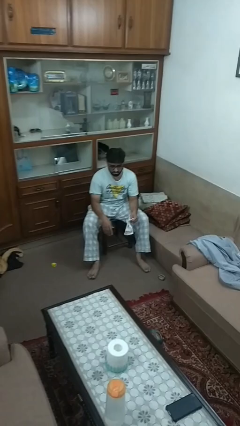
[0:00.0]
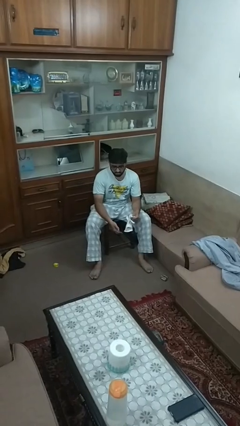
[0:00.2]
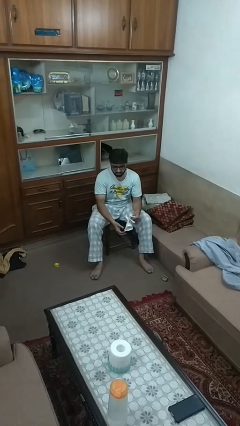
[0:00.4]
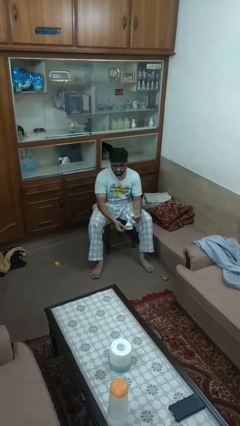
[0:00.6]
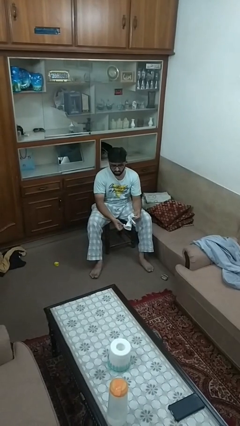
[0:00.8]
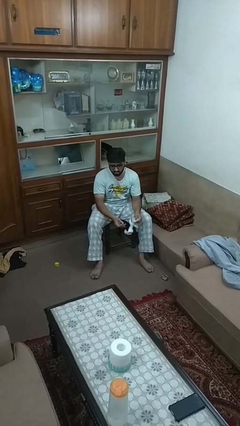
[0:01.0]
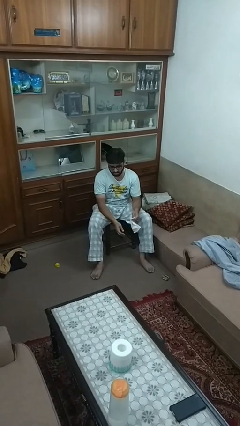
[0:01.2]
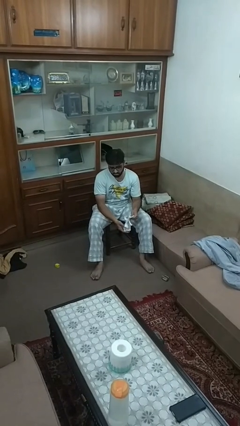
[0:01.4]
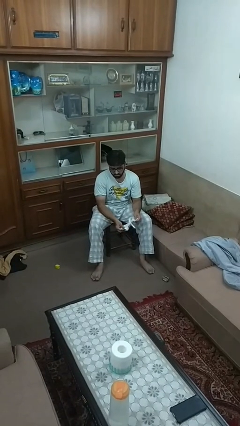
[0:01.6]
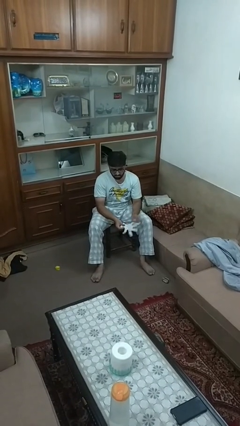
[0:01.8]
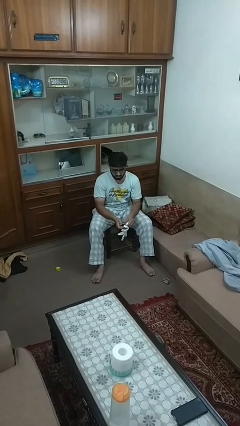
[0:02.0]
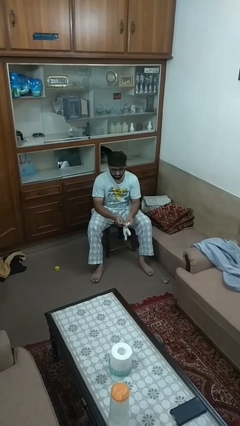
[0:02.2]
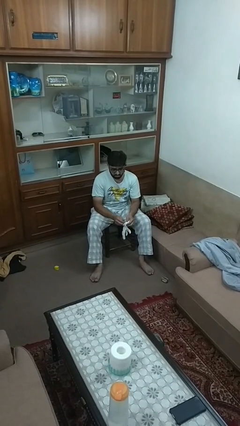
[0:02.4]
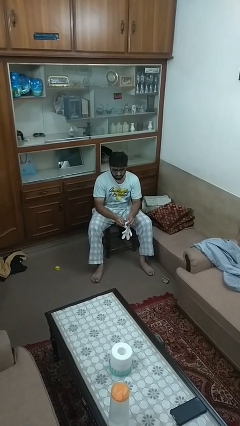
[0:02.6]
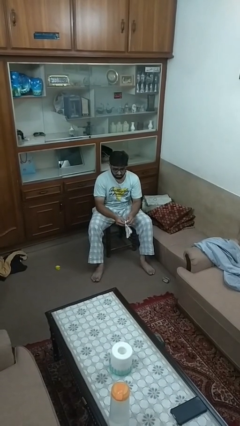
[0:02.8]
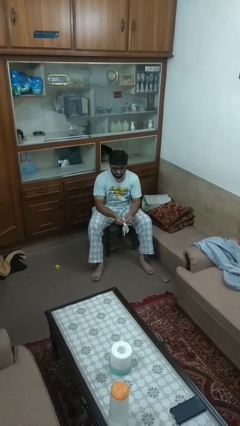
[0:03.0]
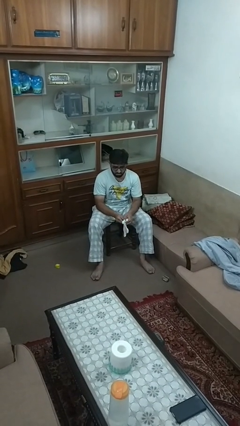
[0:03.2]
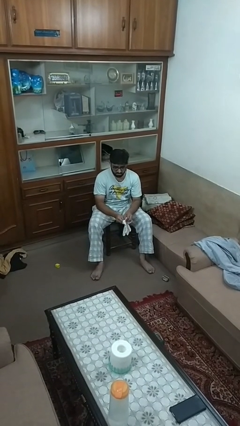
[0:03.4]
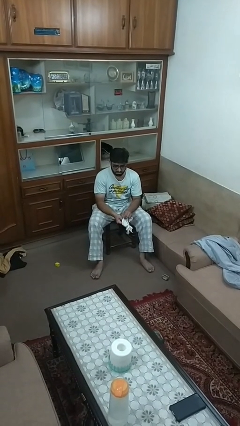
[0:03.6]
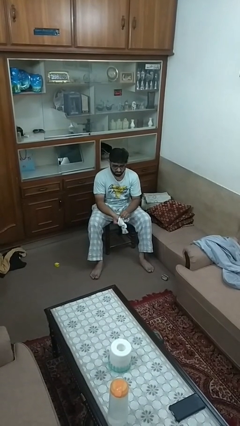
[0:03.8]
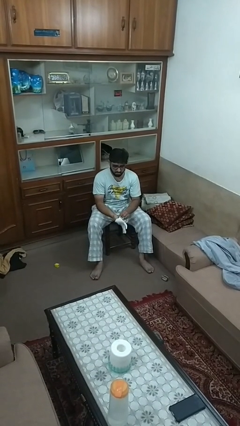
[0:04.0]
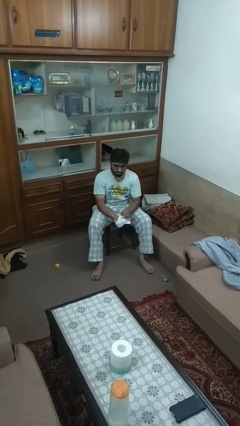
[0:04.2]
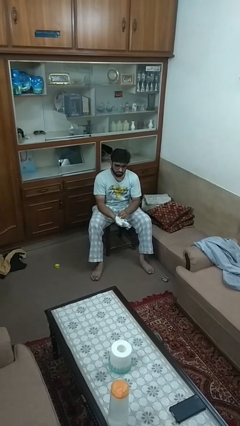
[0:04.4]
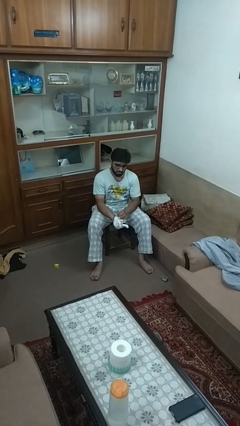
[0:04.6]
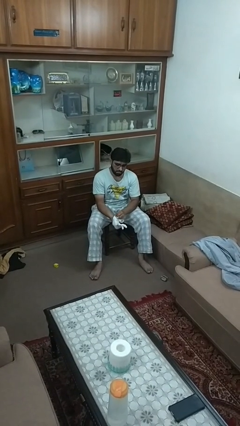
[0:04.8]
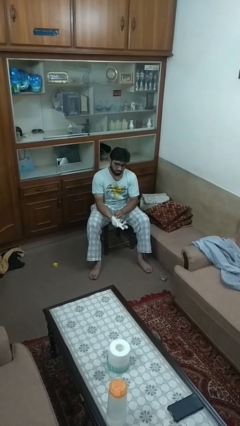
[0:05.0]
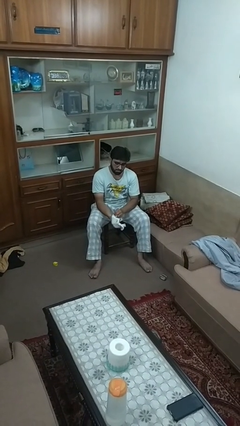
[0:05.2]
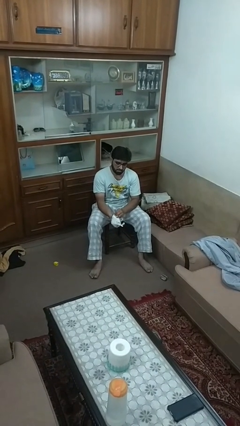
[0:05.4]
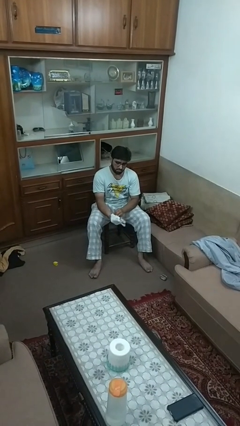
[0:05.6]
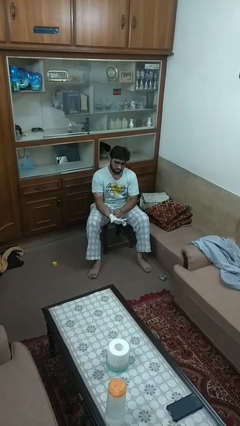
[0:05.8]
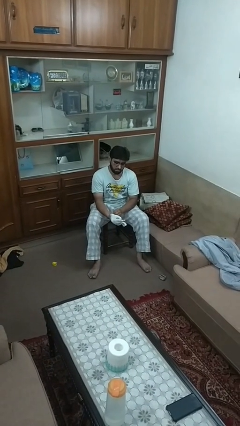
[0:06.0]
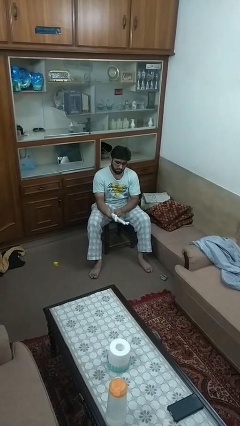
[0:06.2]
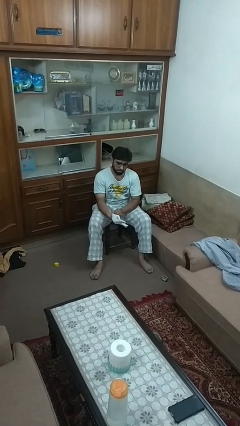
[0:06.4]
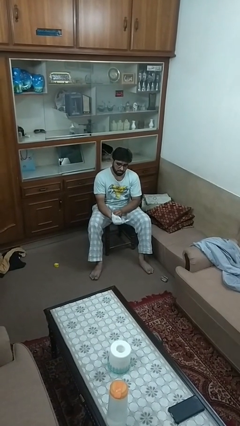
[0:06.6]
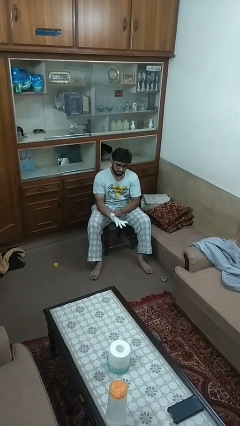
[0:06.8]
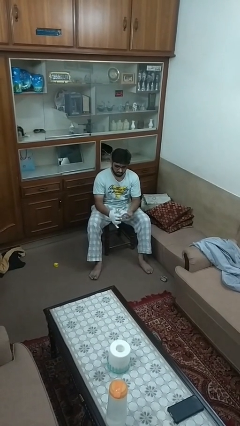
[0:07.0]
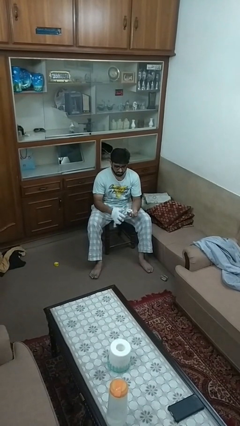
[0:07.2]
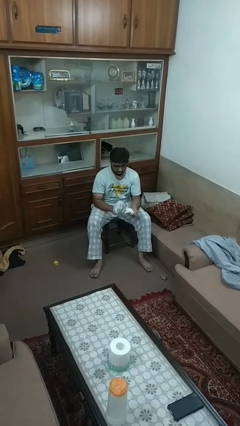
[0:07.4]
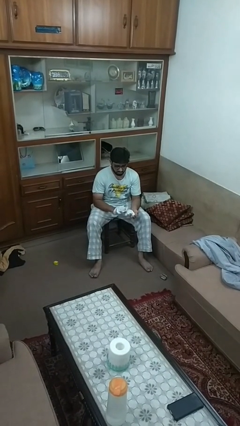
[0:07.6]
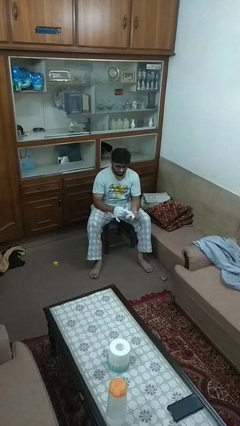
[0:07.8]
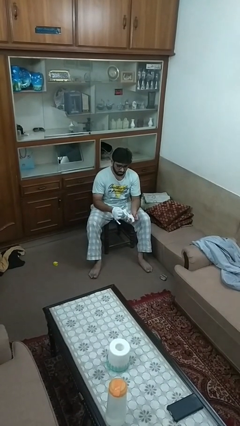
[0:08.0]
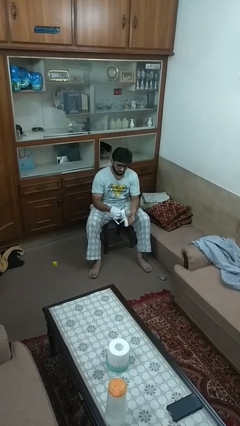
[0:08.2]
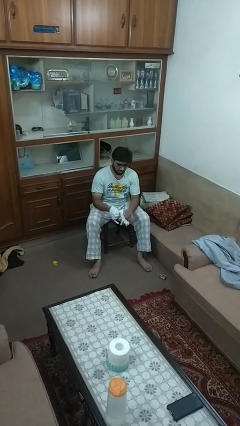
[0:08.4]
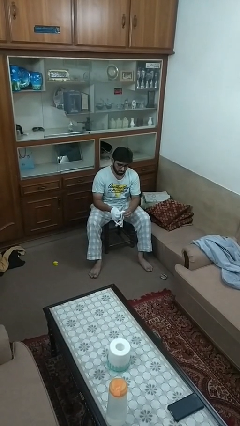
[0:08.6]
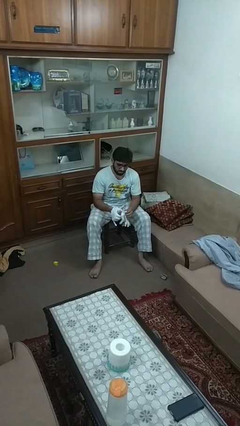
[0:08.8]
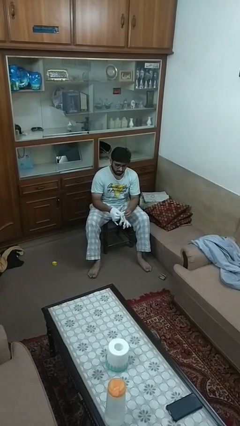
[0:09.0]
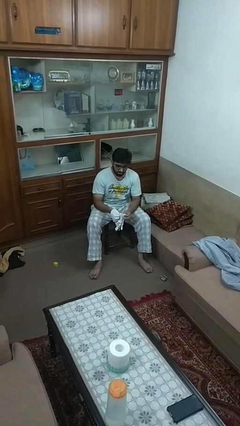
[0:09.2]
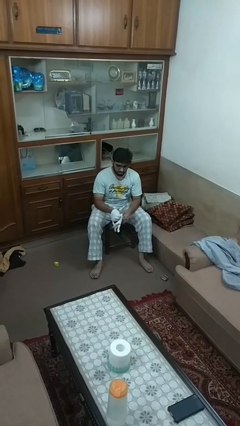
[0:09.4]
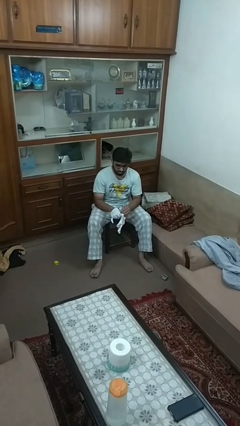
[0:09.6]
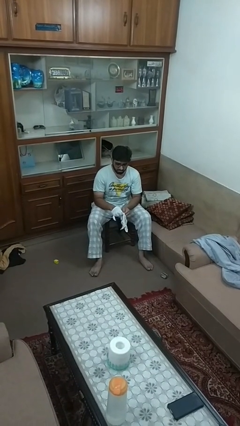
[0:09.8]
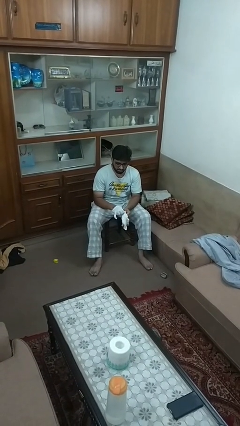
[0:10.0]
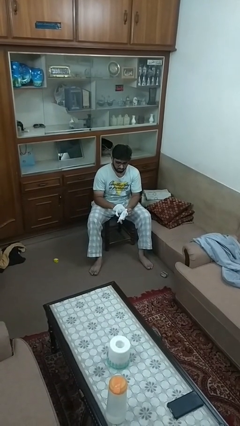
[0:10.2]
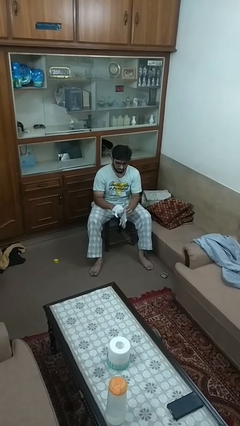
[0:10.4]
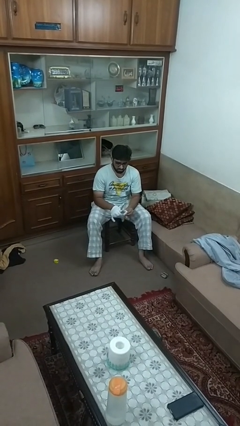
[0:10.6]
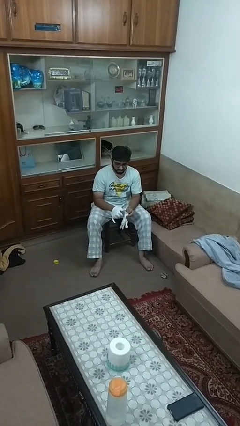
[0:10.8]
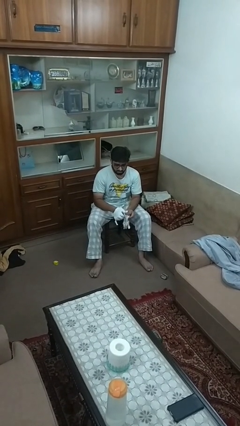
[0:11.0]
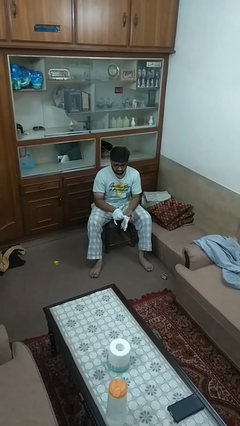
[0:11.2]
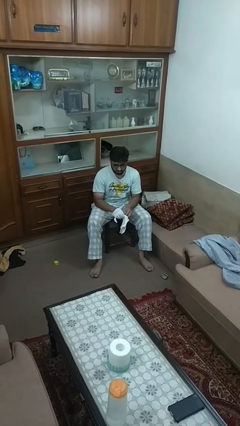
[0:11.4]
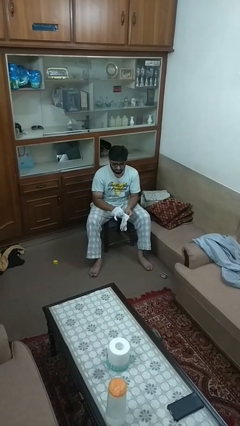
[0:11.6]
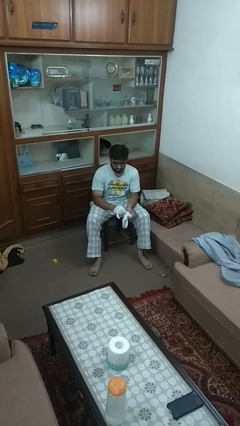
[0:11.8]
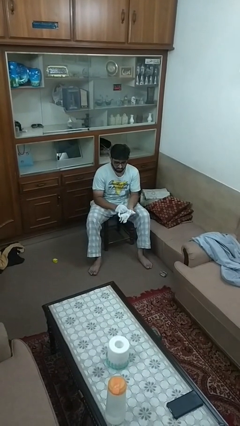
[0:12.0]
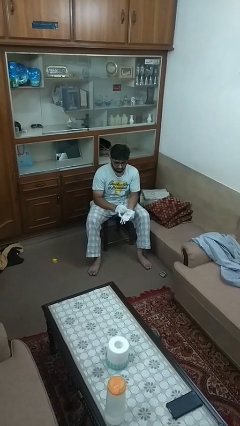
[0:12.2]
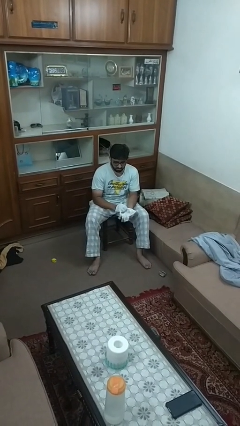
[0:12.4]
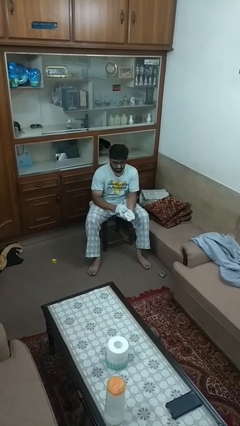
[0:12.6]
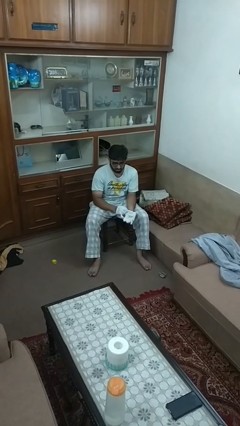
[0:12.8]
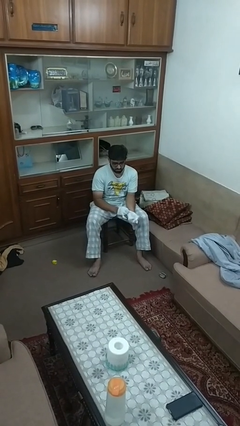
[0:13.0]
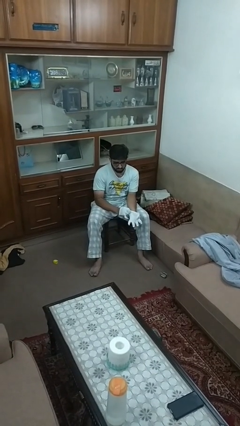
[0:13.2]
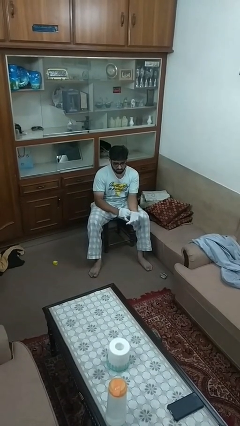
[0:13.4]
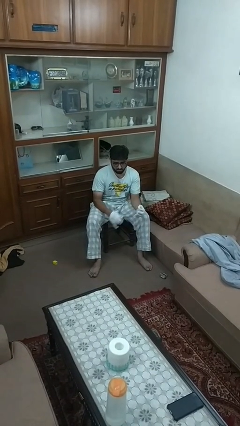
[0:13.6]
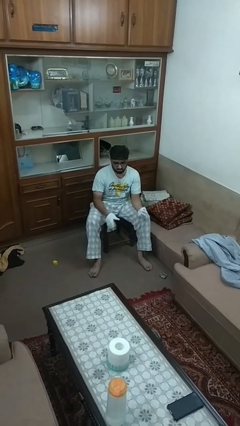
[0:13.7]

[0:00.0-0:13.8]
person puts on gloves

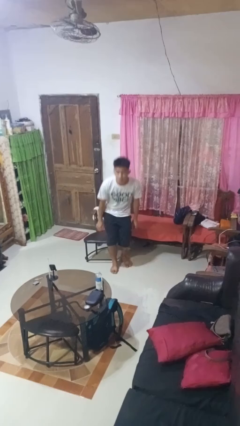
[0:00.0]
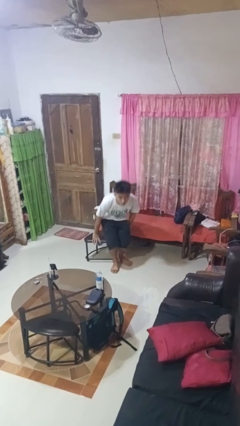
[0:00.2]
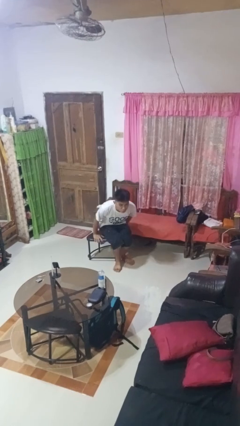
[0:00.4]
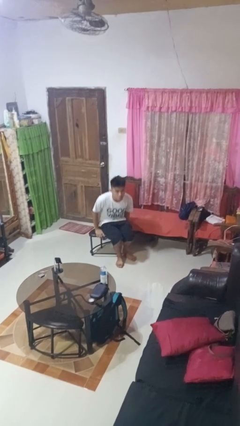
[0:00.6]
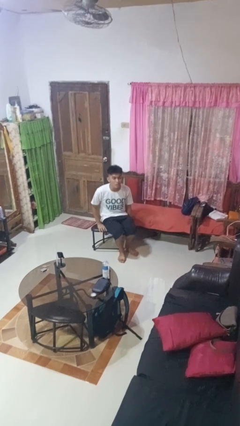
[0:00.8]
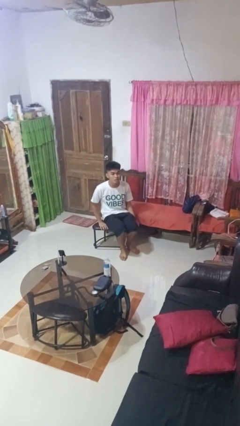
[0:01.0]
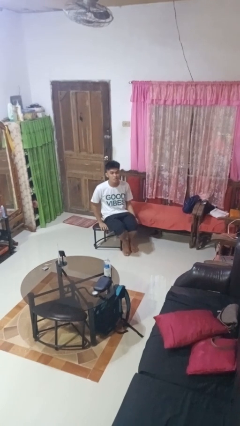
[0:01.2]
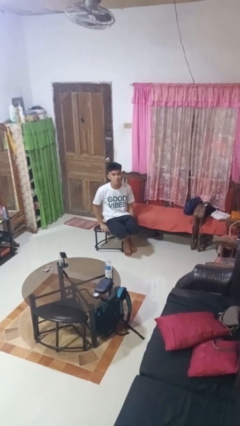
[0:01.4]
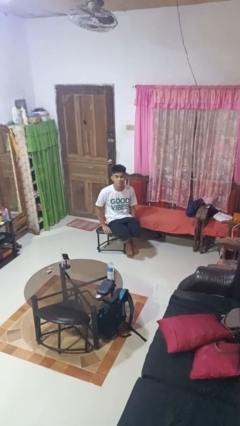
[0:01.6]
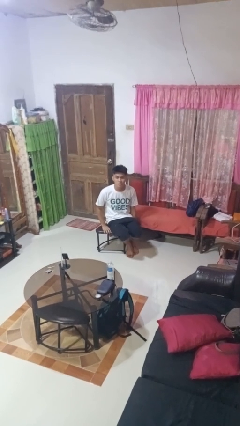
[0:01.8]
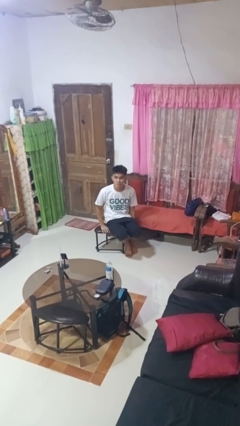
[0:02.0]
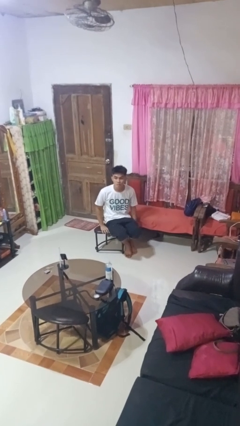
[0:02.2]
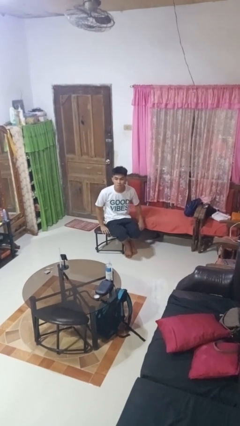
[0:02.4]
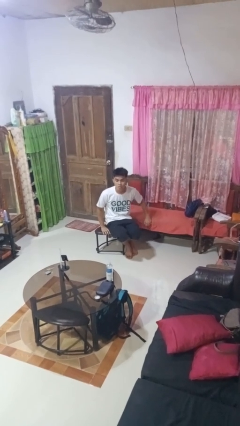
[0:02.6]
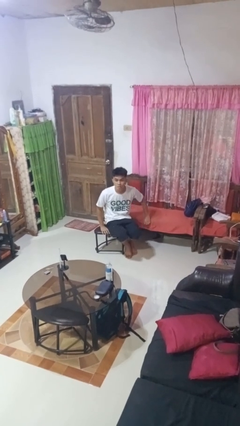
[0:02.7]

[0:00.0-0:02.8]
person sits down

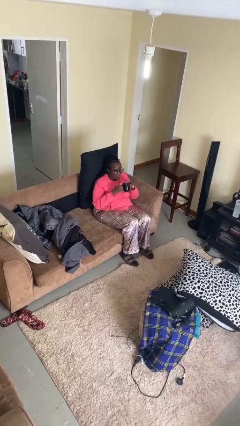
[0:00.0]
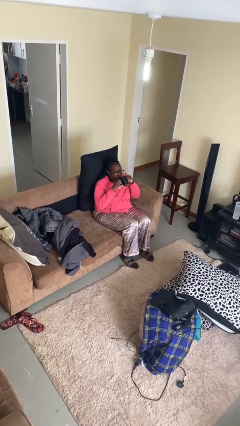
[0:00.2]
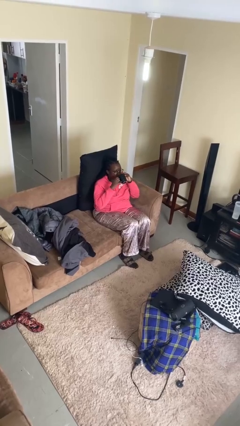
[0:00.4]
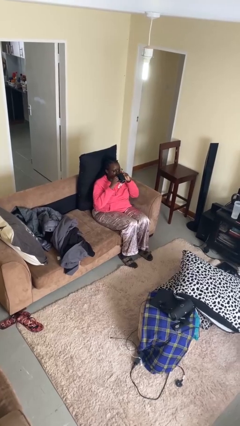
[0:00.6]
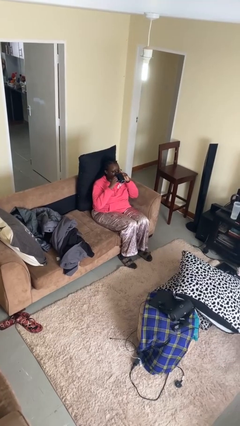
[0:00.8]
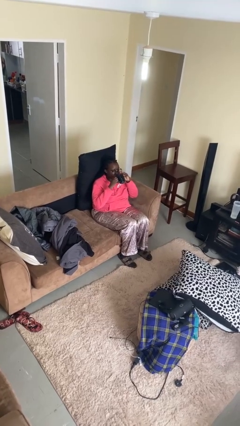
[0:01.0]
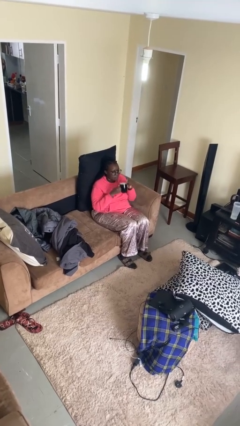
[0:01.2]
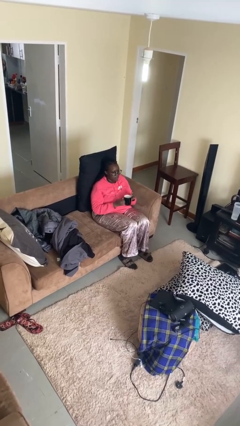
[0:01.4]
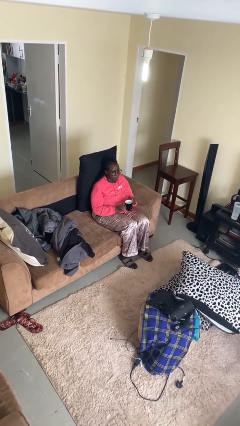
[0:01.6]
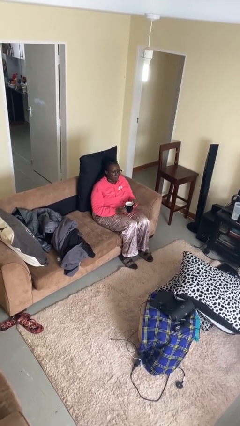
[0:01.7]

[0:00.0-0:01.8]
person drinks from mug
